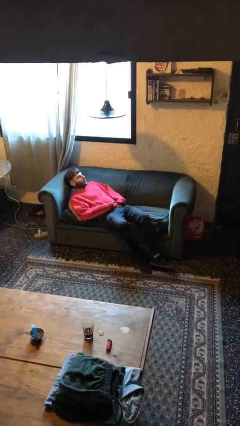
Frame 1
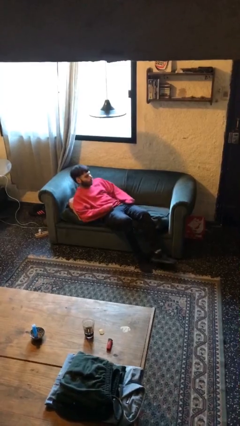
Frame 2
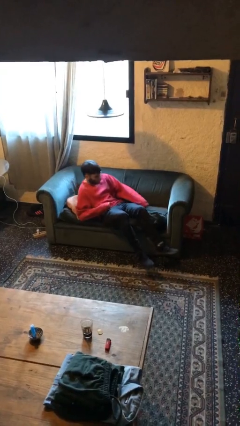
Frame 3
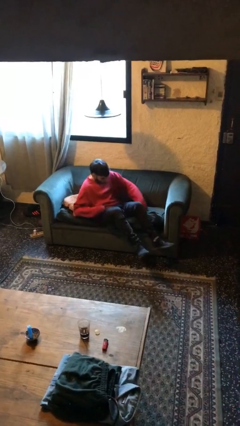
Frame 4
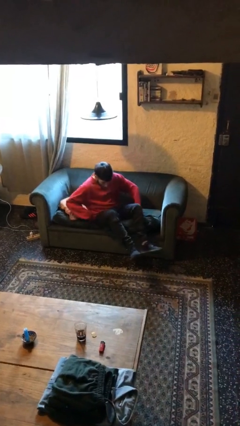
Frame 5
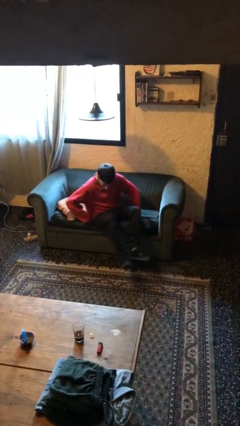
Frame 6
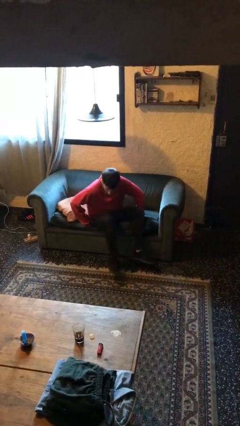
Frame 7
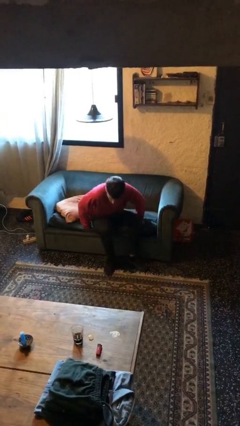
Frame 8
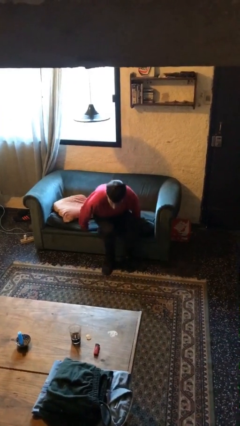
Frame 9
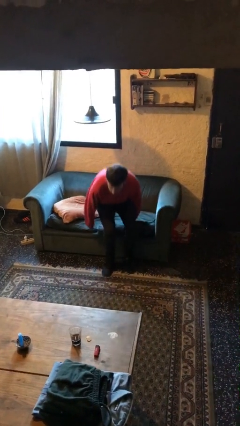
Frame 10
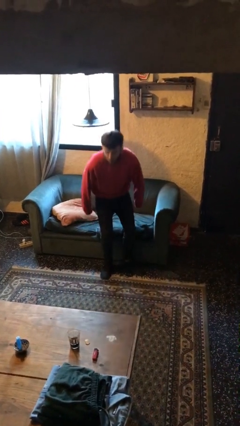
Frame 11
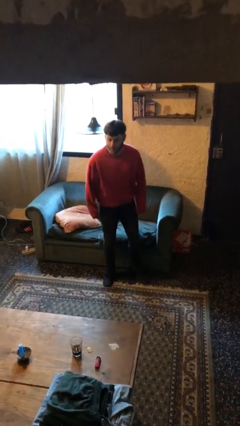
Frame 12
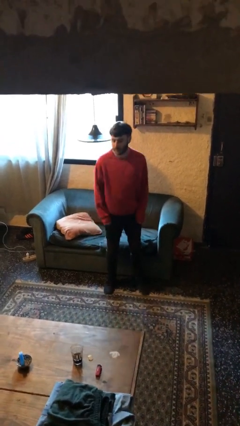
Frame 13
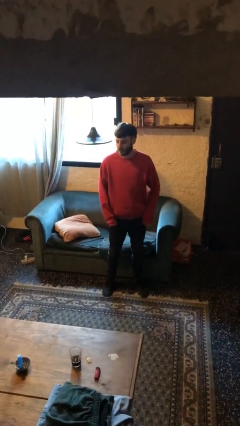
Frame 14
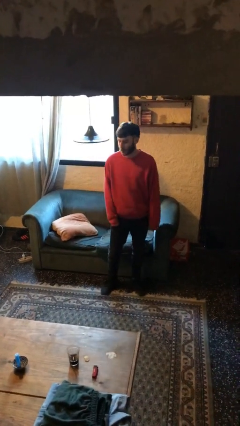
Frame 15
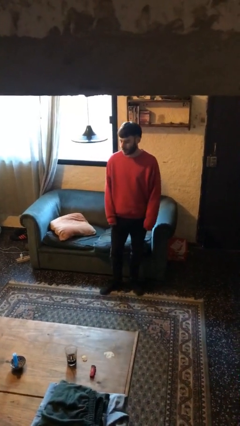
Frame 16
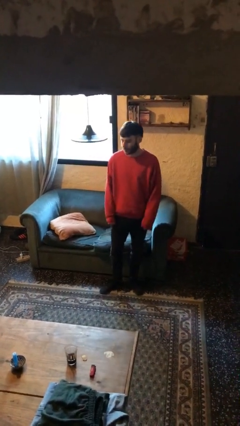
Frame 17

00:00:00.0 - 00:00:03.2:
person stands up

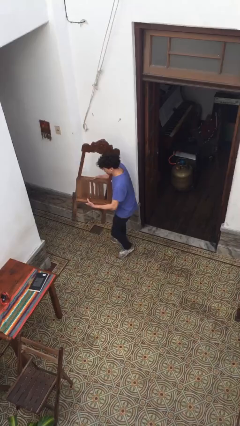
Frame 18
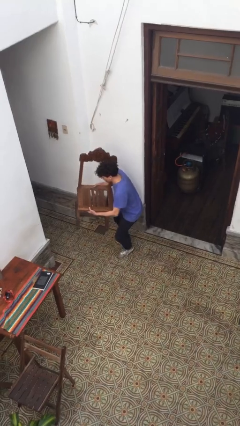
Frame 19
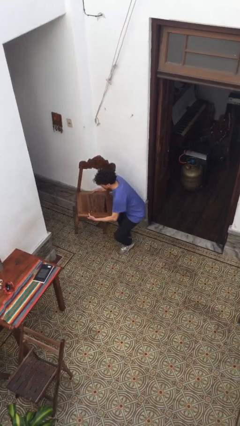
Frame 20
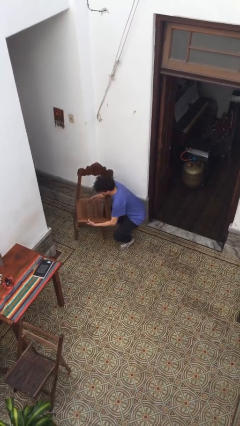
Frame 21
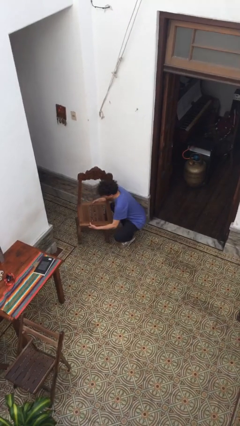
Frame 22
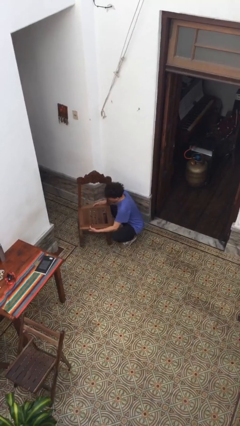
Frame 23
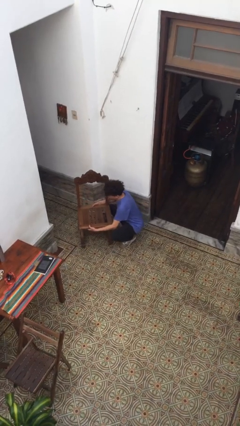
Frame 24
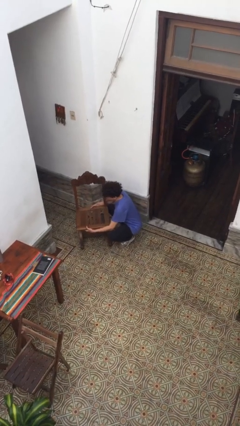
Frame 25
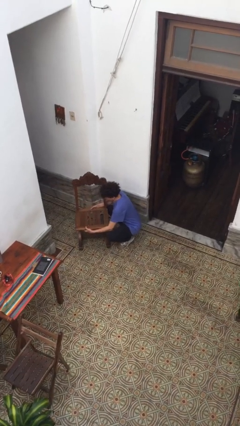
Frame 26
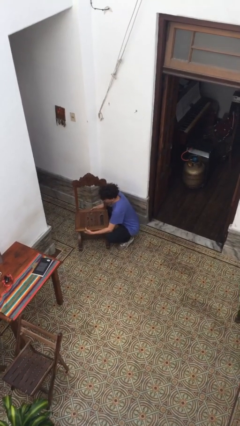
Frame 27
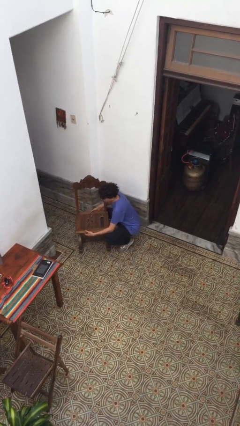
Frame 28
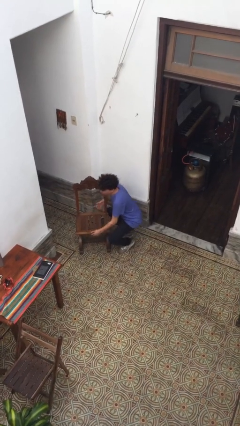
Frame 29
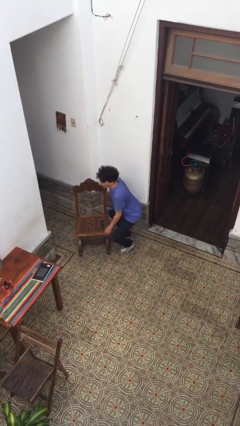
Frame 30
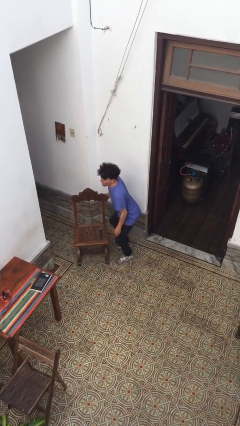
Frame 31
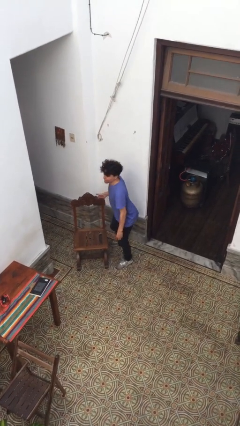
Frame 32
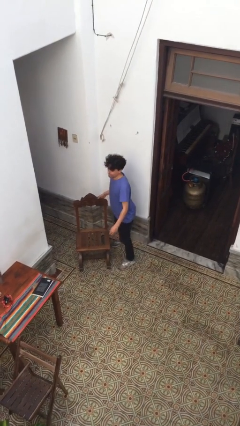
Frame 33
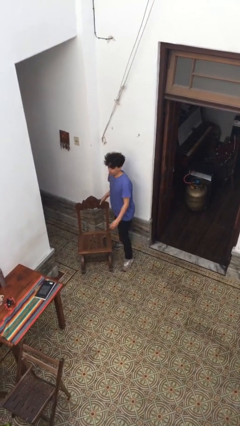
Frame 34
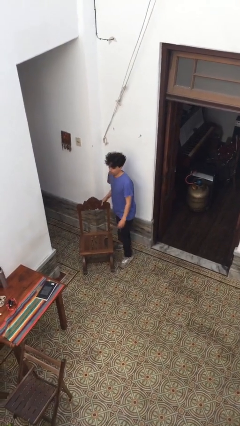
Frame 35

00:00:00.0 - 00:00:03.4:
person puts down object on floor

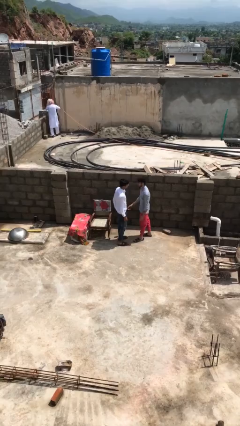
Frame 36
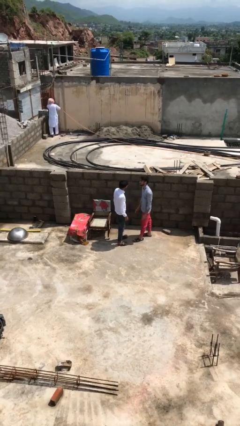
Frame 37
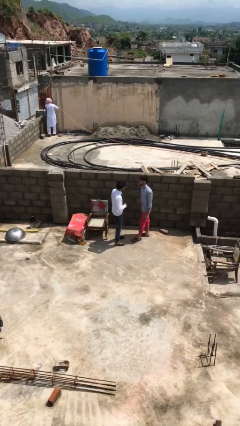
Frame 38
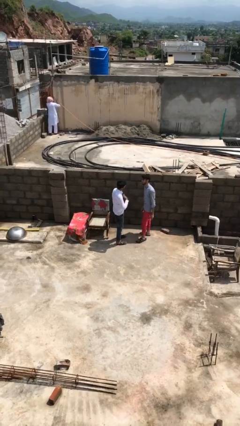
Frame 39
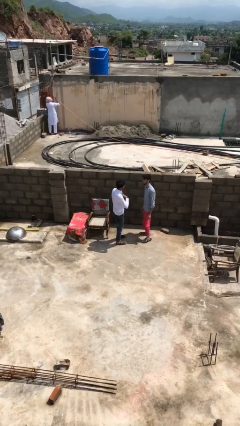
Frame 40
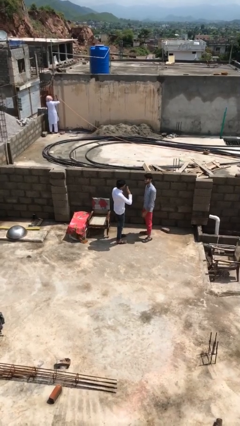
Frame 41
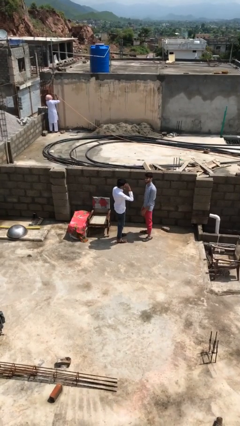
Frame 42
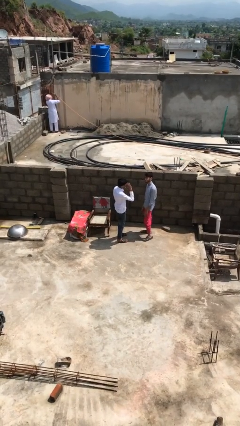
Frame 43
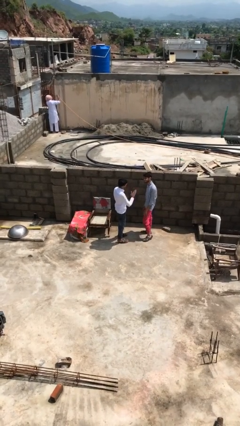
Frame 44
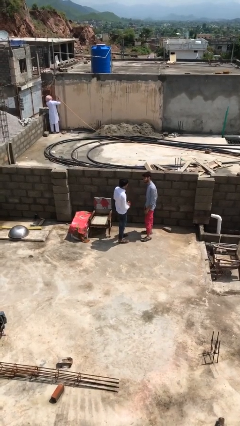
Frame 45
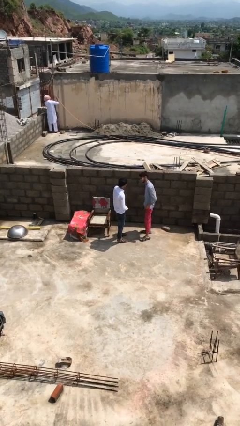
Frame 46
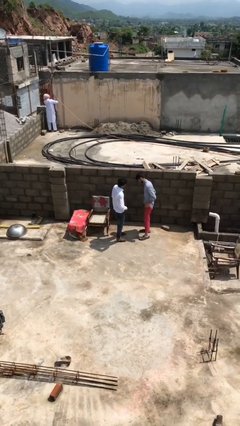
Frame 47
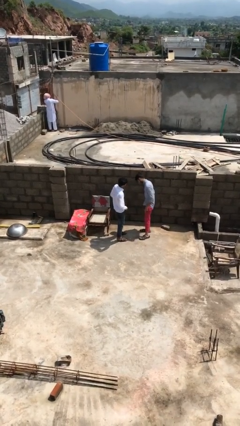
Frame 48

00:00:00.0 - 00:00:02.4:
person talks to person

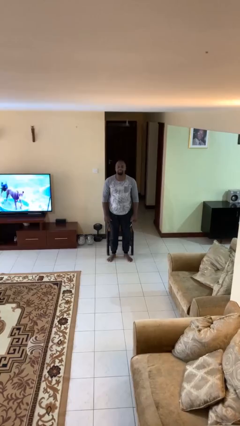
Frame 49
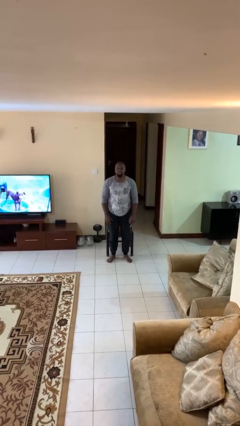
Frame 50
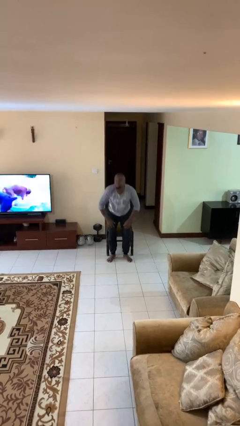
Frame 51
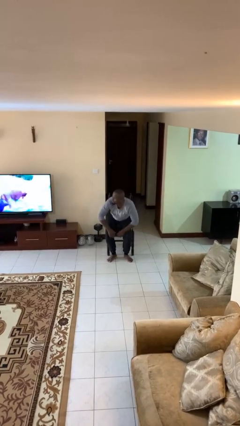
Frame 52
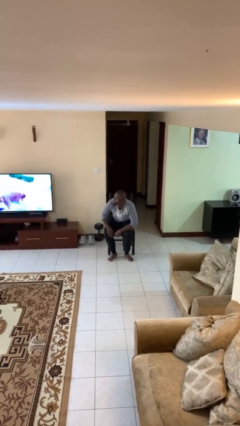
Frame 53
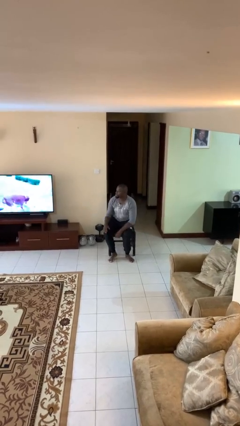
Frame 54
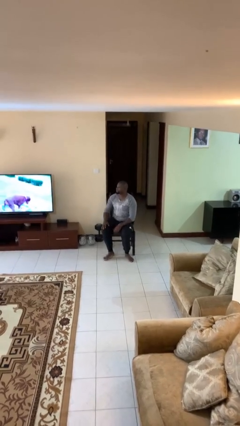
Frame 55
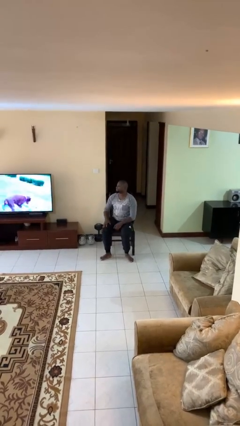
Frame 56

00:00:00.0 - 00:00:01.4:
person sits down

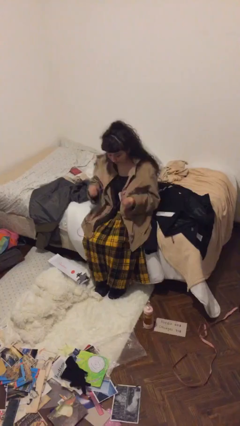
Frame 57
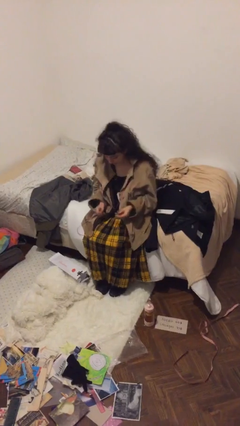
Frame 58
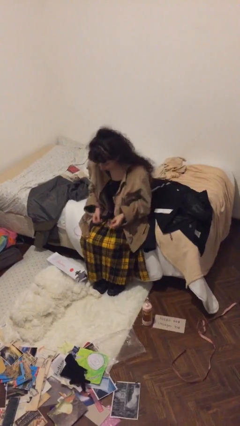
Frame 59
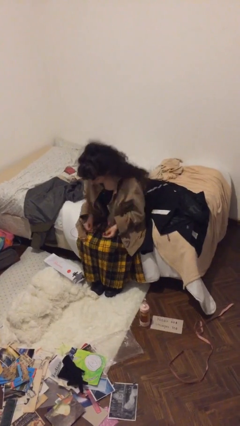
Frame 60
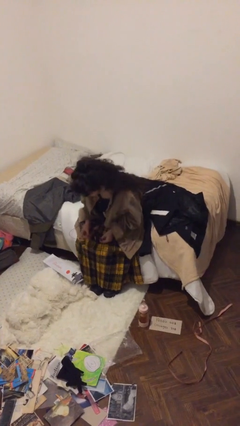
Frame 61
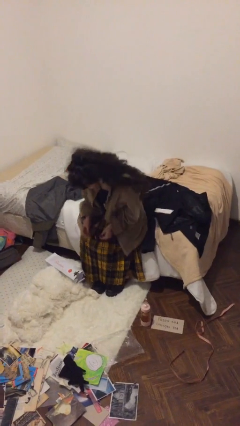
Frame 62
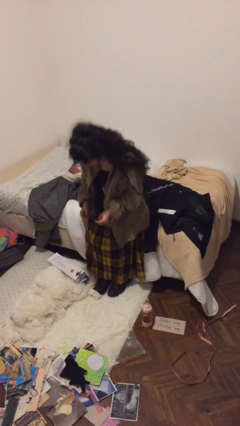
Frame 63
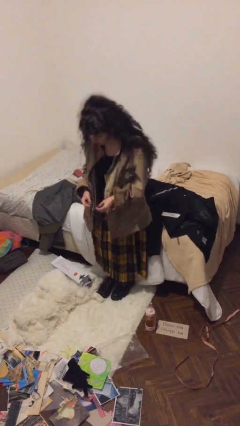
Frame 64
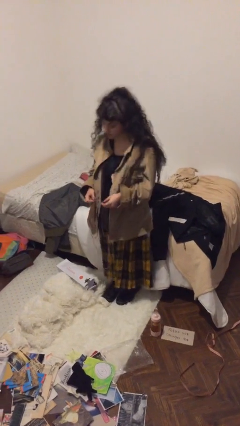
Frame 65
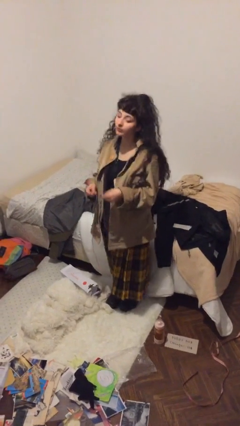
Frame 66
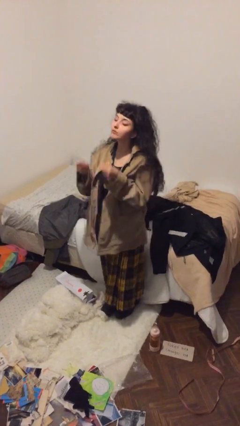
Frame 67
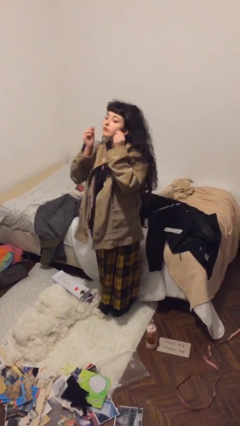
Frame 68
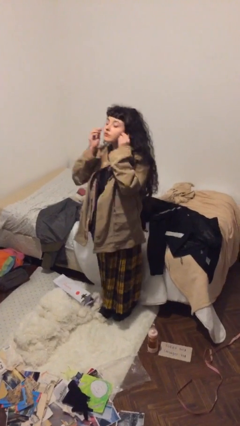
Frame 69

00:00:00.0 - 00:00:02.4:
person takes off headphones

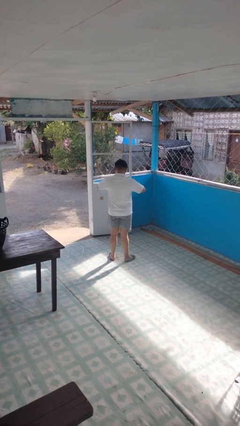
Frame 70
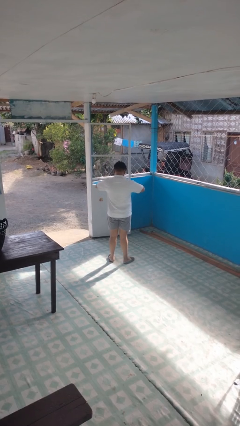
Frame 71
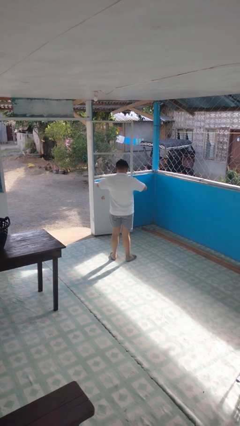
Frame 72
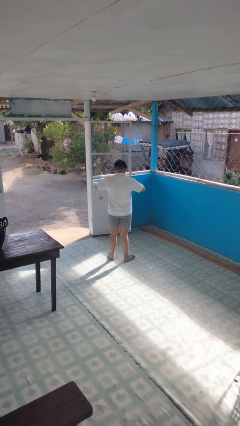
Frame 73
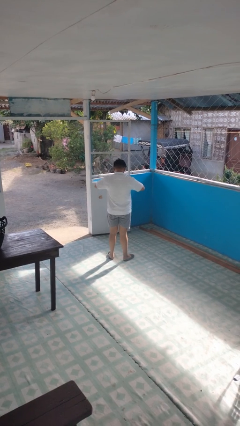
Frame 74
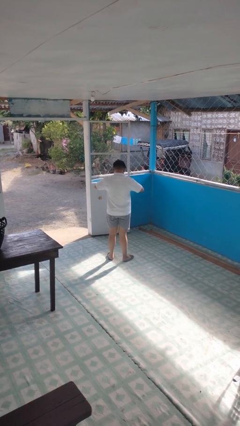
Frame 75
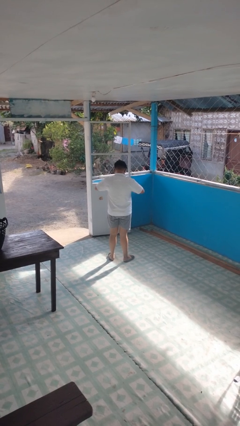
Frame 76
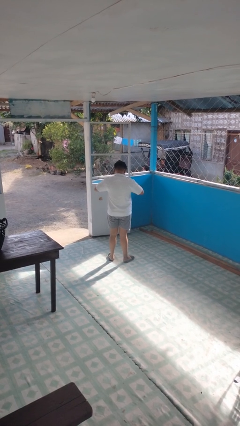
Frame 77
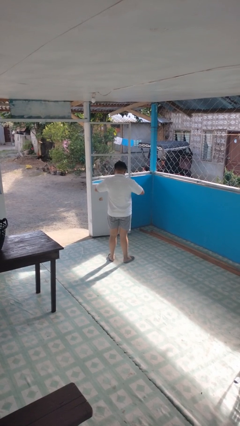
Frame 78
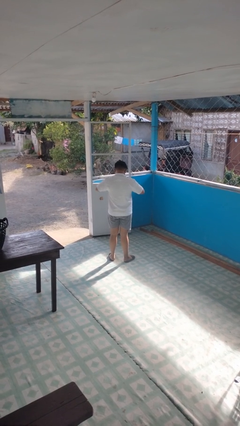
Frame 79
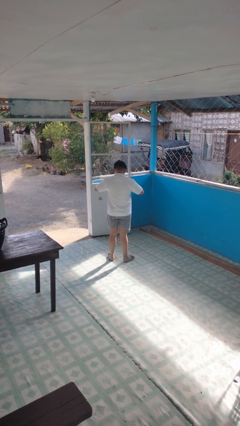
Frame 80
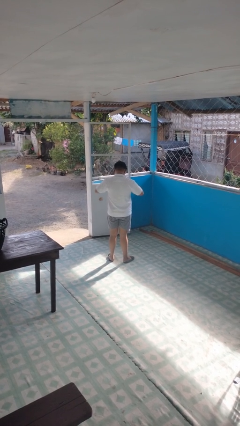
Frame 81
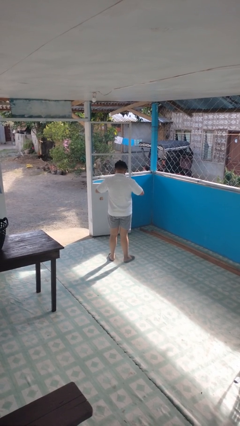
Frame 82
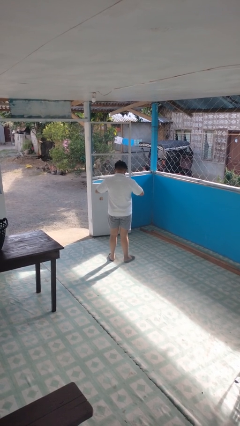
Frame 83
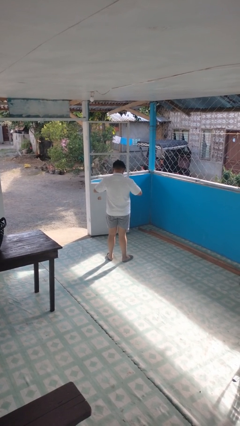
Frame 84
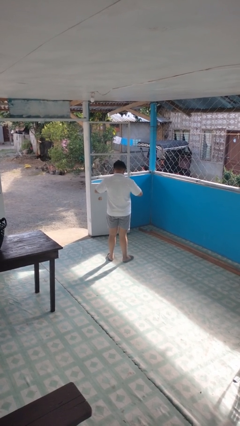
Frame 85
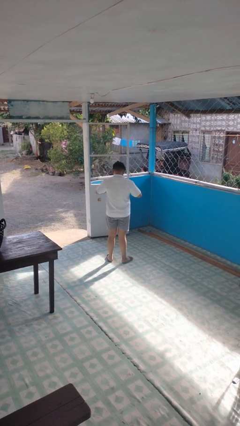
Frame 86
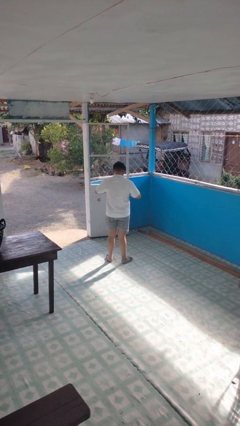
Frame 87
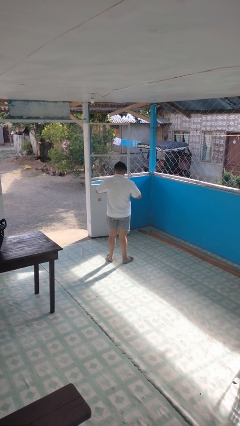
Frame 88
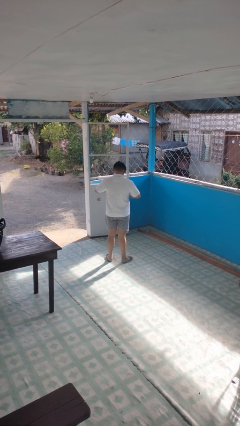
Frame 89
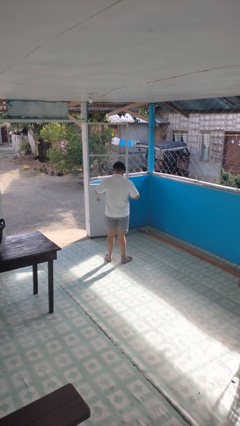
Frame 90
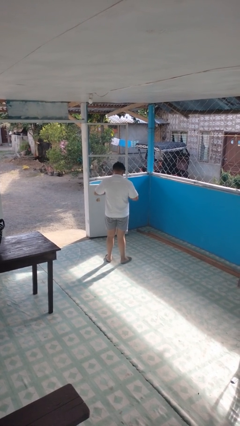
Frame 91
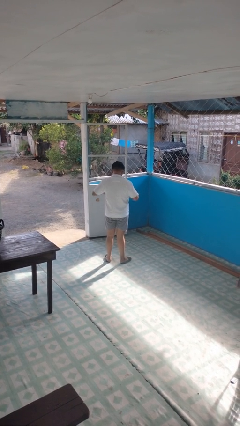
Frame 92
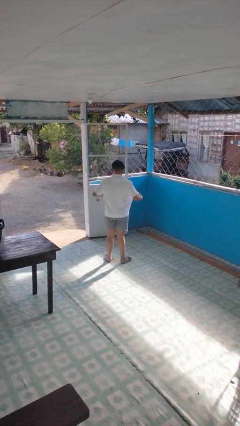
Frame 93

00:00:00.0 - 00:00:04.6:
person unbuttons shirt
